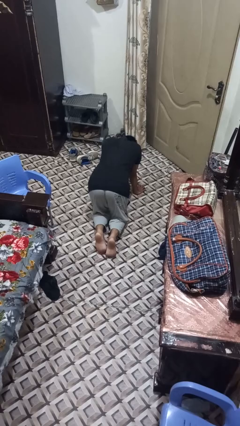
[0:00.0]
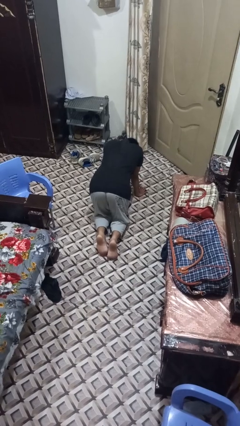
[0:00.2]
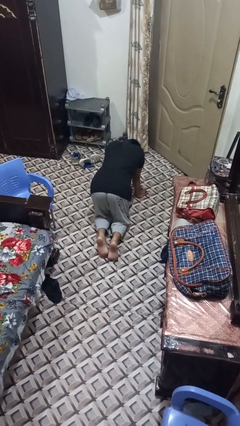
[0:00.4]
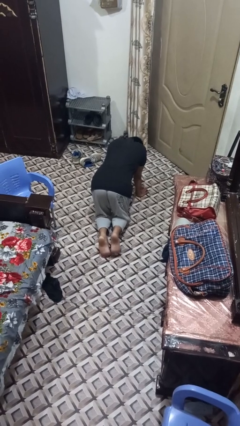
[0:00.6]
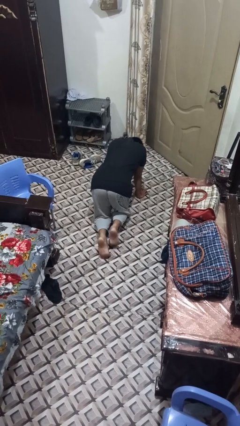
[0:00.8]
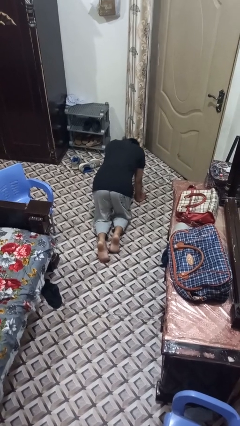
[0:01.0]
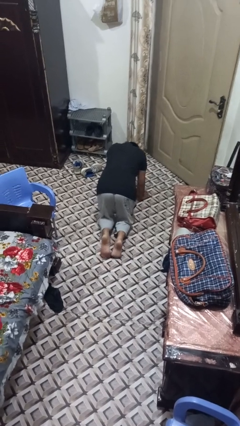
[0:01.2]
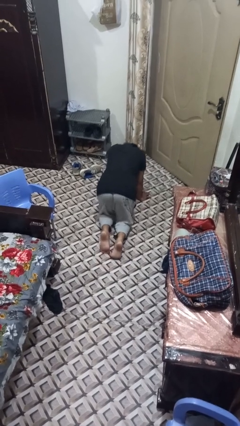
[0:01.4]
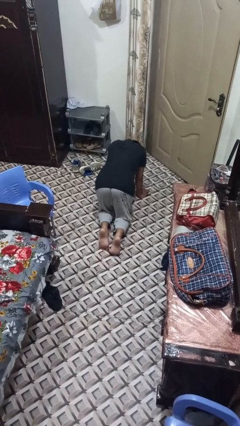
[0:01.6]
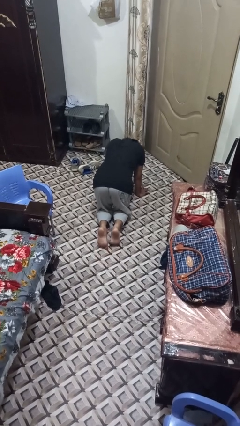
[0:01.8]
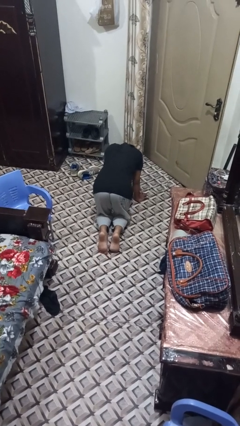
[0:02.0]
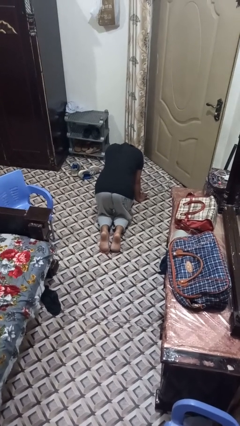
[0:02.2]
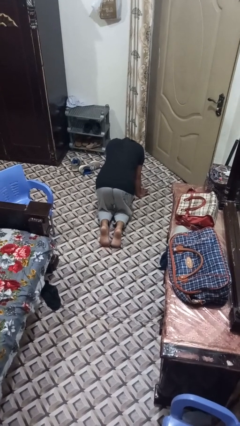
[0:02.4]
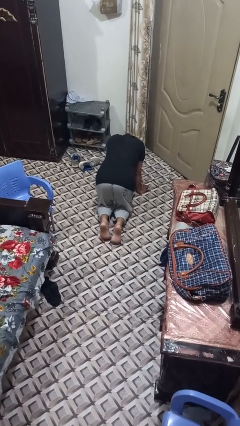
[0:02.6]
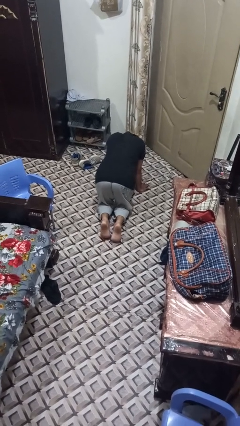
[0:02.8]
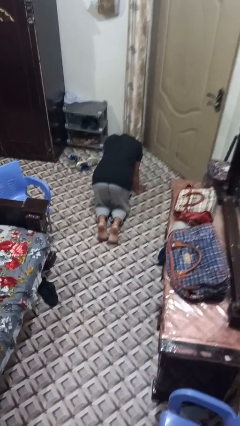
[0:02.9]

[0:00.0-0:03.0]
person crawls

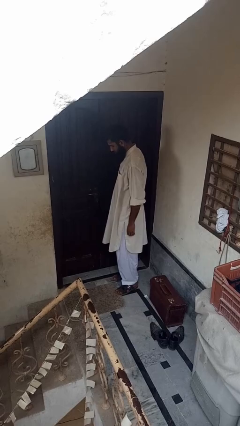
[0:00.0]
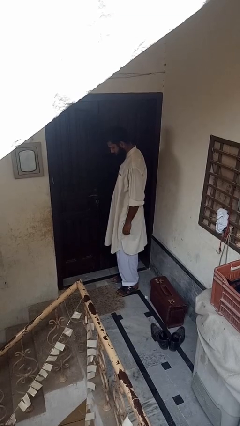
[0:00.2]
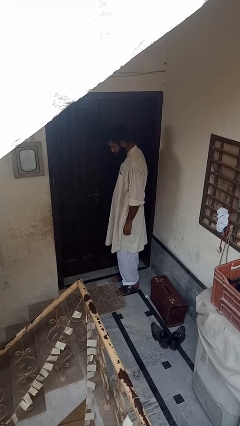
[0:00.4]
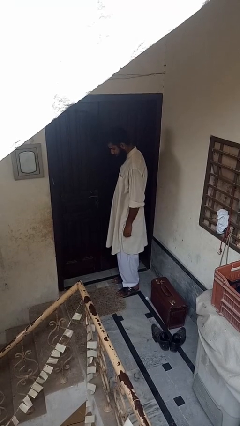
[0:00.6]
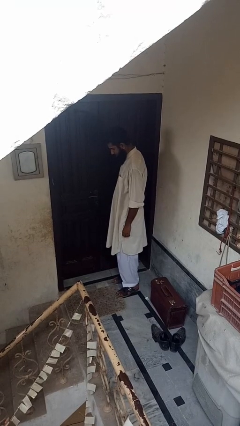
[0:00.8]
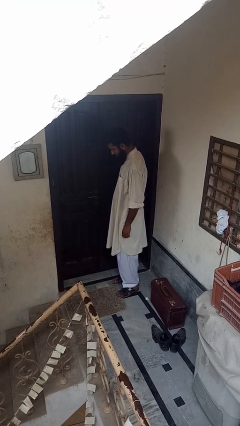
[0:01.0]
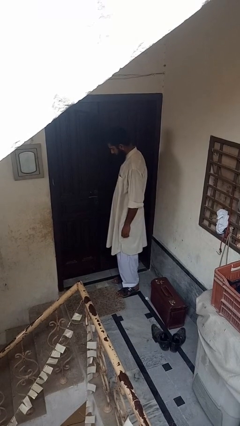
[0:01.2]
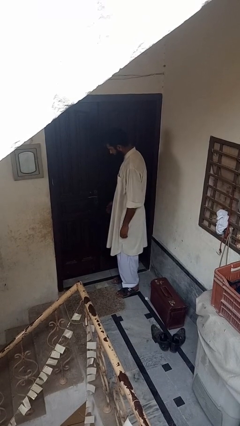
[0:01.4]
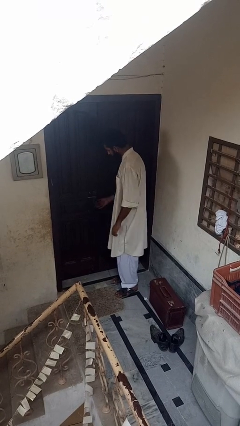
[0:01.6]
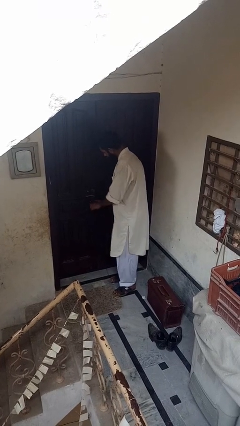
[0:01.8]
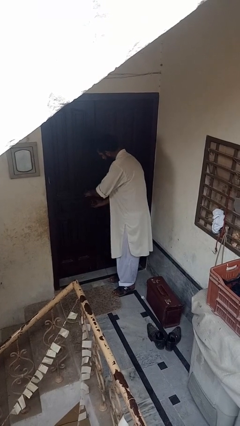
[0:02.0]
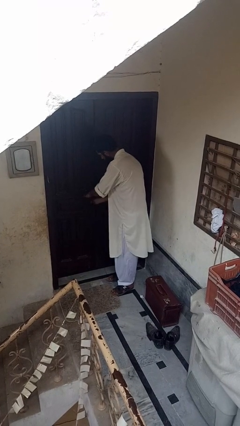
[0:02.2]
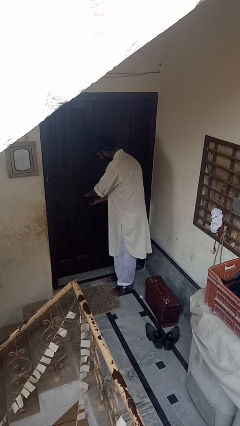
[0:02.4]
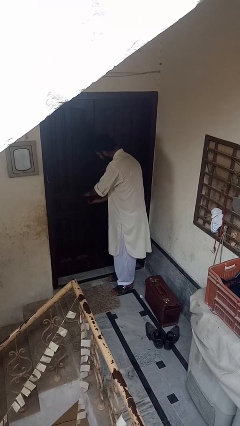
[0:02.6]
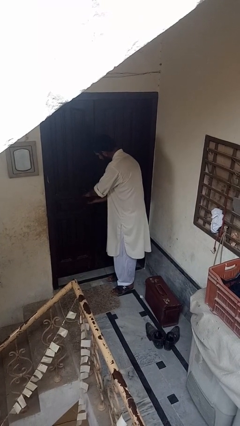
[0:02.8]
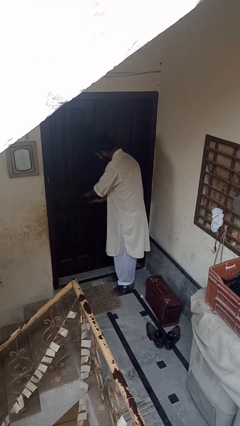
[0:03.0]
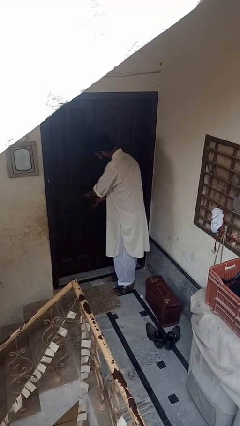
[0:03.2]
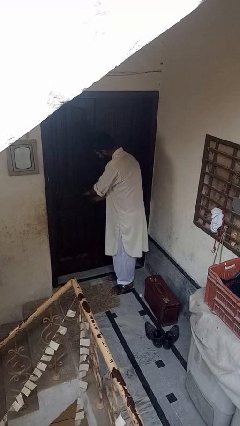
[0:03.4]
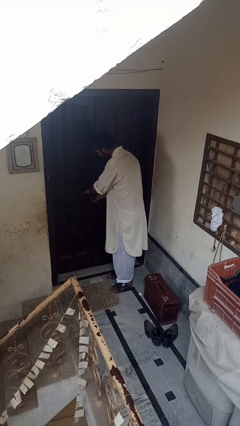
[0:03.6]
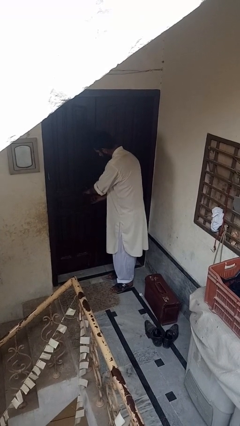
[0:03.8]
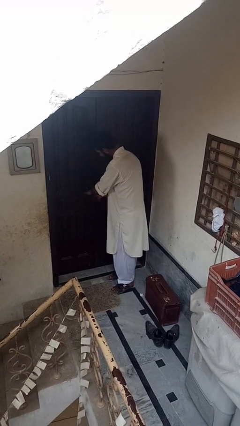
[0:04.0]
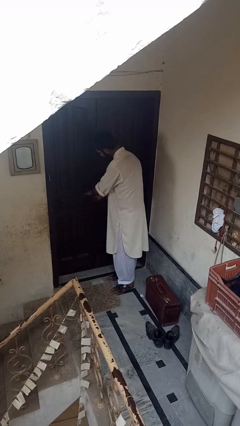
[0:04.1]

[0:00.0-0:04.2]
person unlocks door with keys

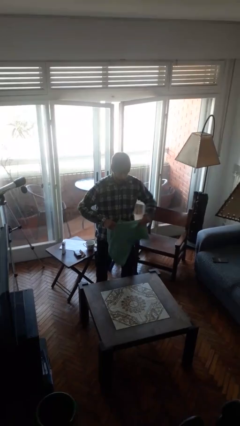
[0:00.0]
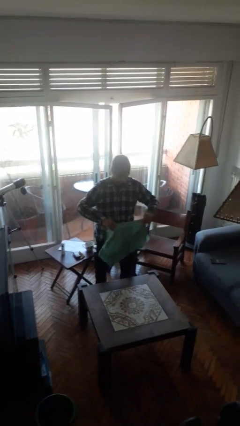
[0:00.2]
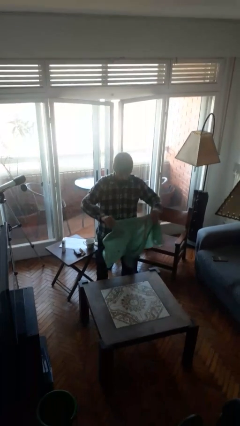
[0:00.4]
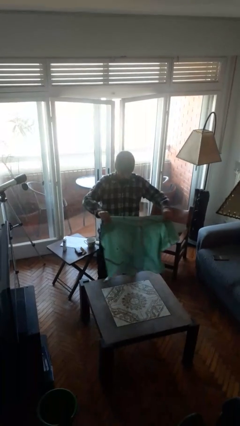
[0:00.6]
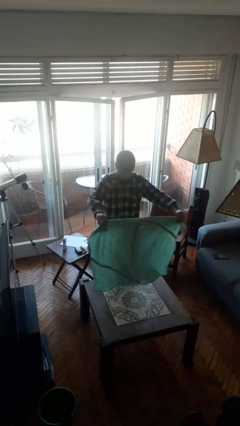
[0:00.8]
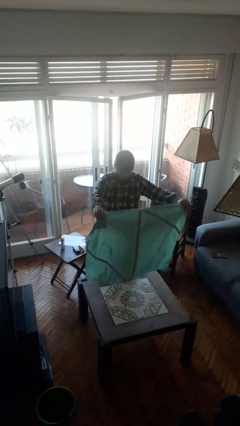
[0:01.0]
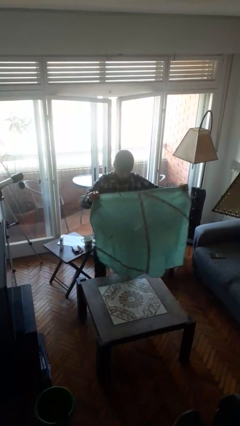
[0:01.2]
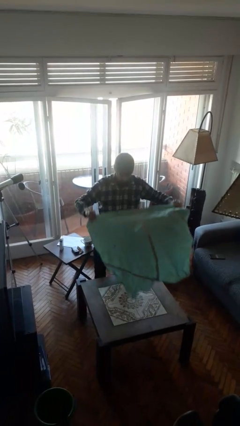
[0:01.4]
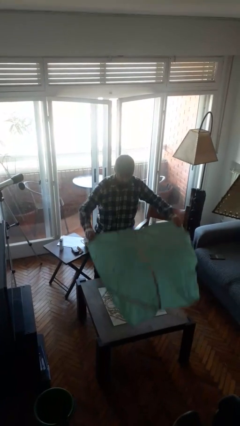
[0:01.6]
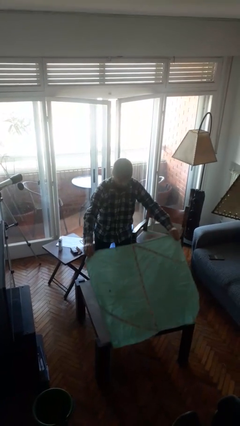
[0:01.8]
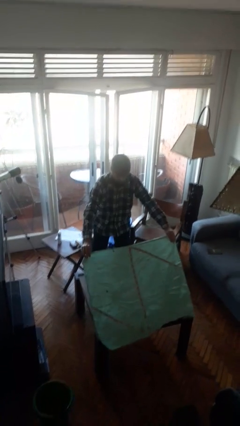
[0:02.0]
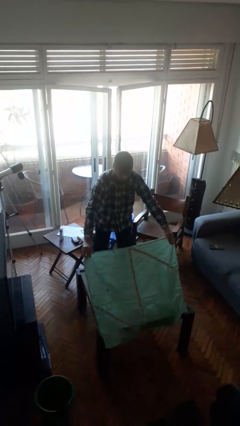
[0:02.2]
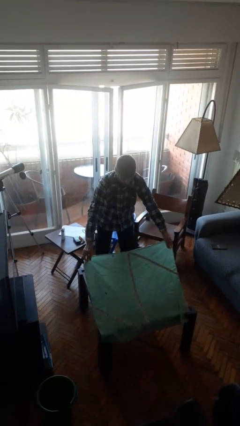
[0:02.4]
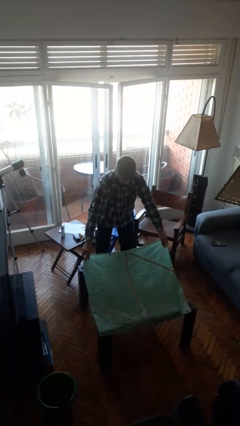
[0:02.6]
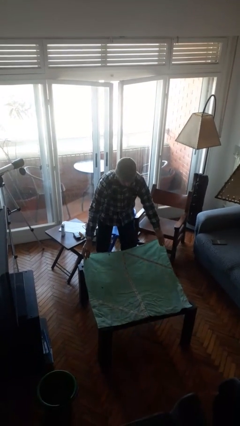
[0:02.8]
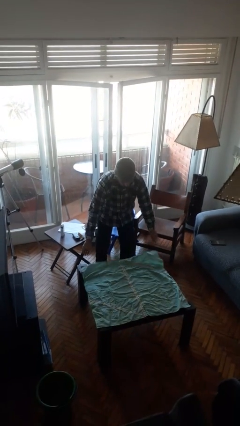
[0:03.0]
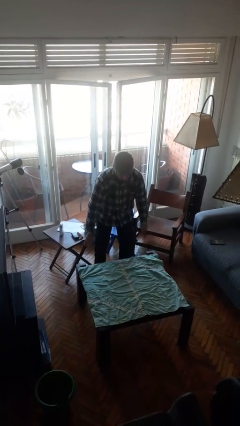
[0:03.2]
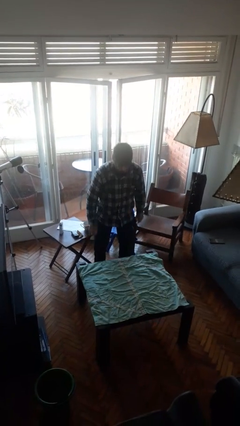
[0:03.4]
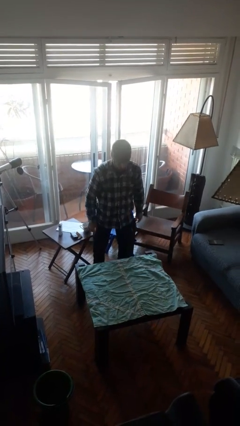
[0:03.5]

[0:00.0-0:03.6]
person spreads tablecloth

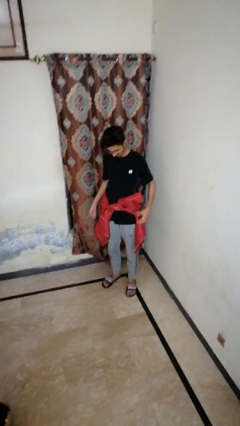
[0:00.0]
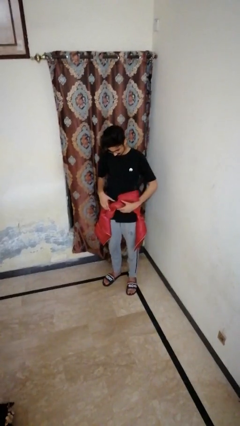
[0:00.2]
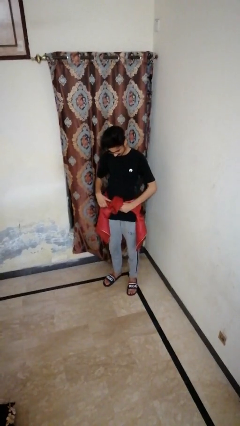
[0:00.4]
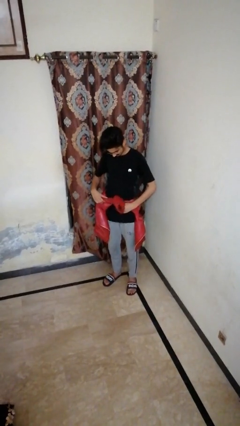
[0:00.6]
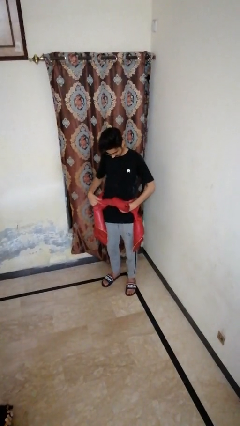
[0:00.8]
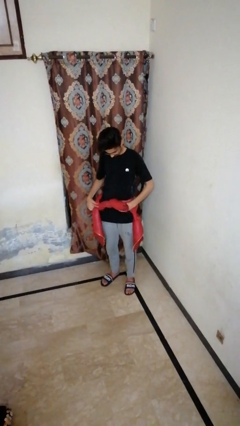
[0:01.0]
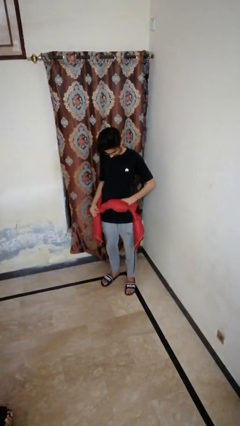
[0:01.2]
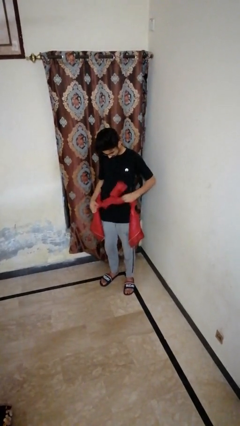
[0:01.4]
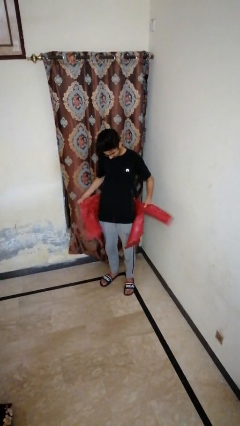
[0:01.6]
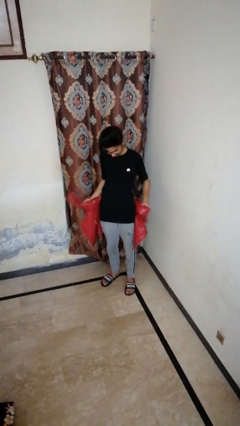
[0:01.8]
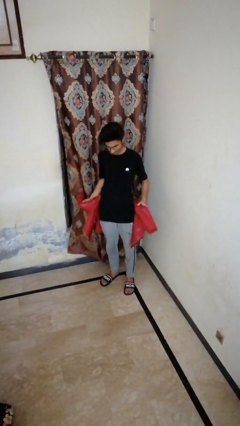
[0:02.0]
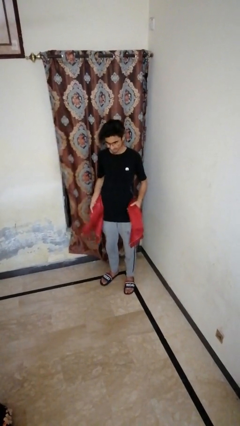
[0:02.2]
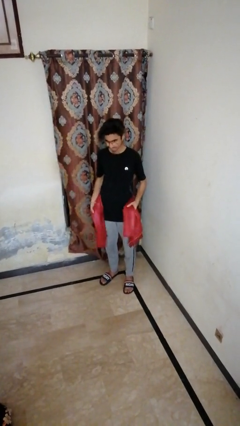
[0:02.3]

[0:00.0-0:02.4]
person unties jacket around waist

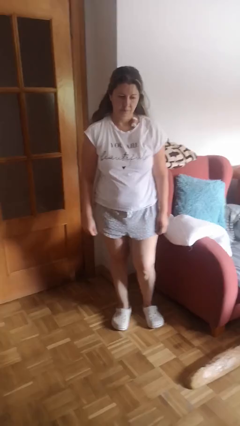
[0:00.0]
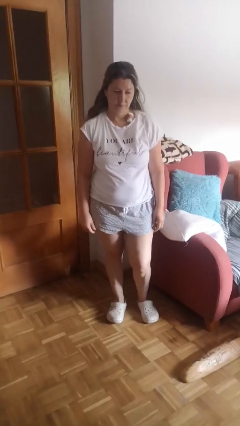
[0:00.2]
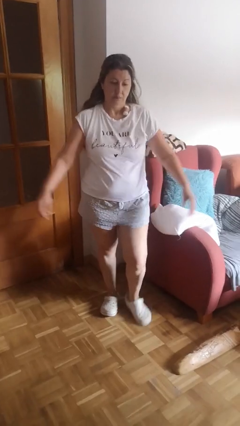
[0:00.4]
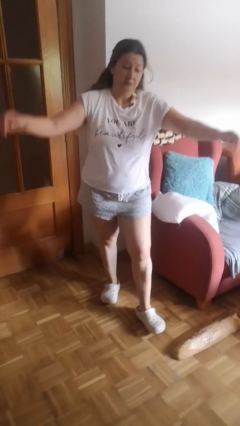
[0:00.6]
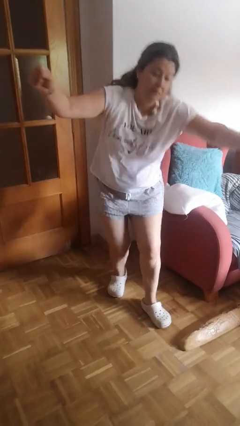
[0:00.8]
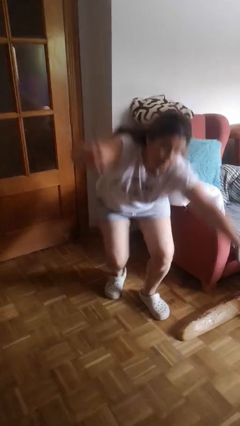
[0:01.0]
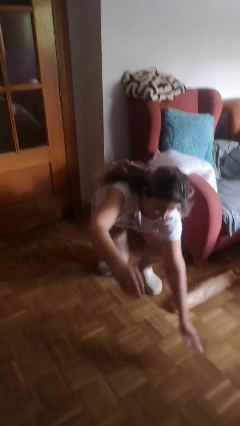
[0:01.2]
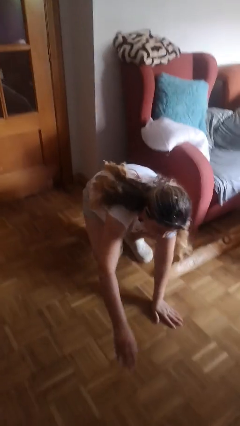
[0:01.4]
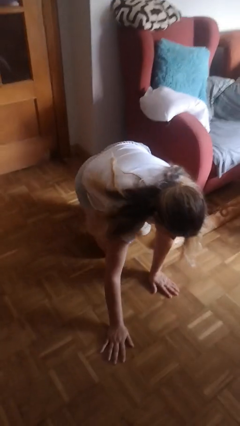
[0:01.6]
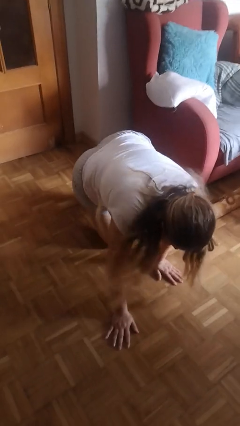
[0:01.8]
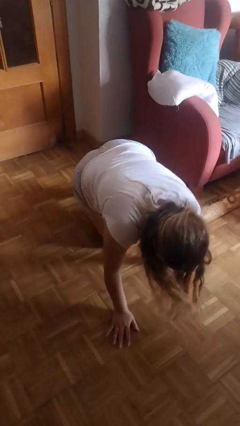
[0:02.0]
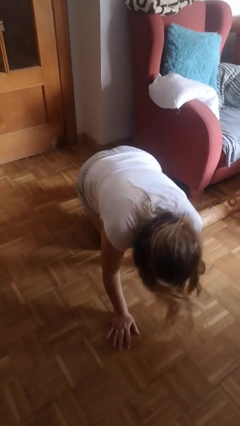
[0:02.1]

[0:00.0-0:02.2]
person trips on object on floor

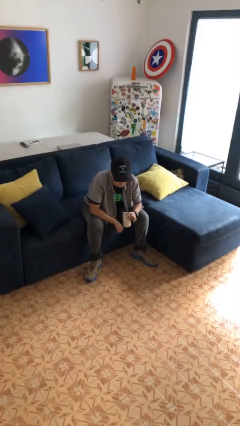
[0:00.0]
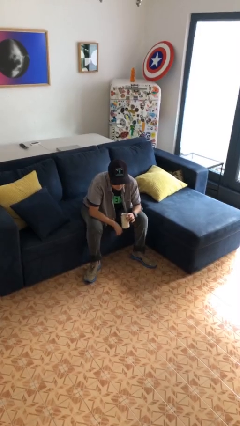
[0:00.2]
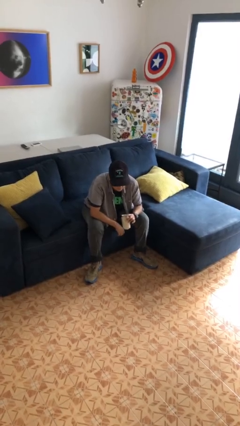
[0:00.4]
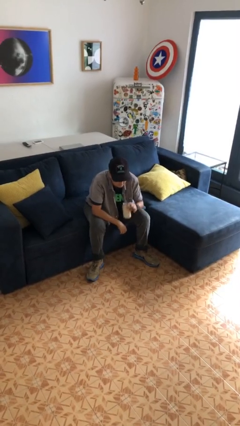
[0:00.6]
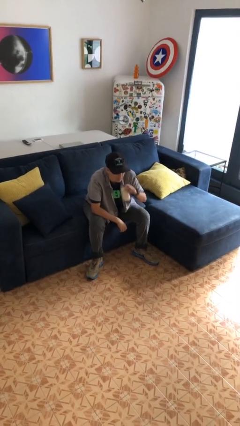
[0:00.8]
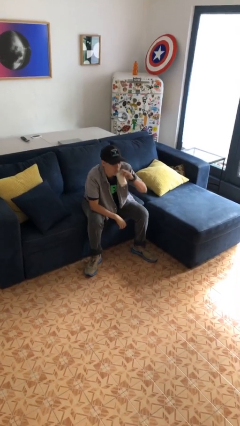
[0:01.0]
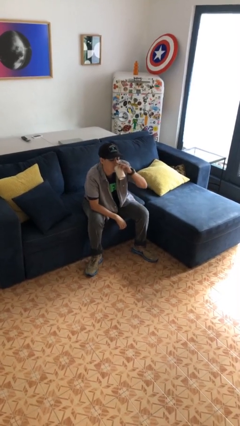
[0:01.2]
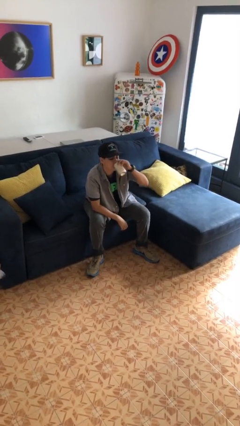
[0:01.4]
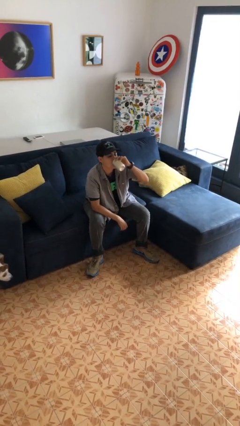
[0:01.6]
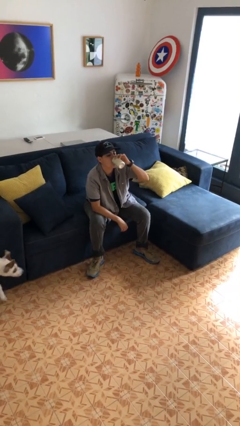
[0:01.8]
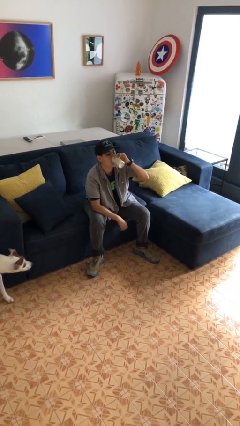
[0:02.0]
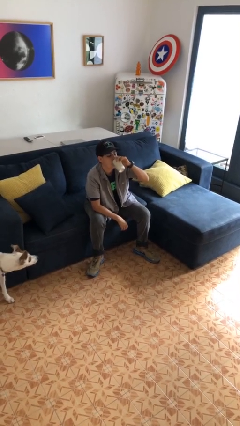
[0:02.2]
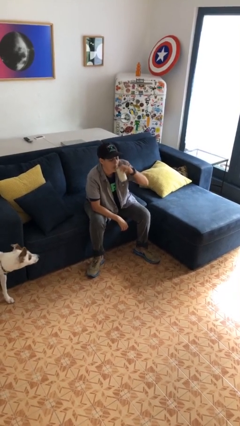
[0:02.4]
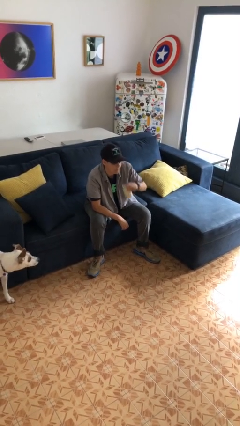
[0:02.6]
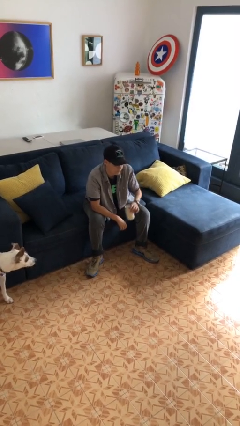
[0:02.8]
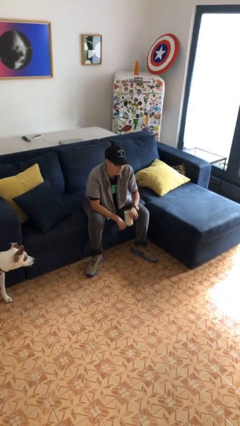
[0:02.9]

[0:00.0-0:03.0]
person drinks from beverage can
